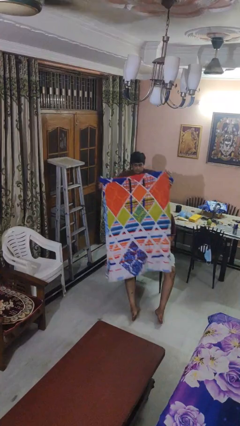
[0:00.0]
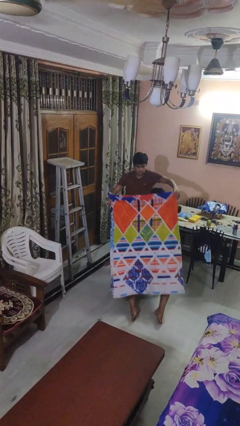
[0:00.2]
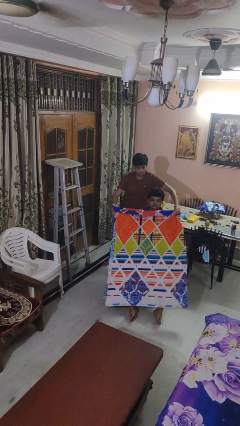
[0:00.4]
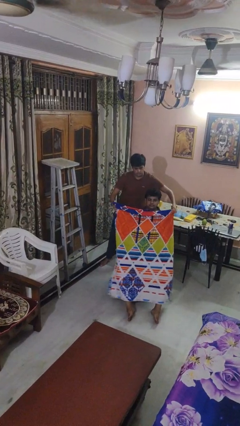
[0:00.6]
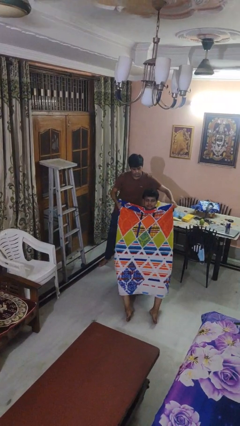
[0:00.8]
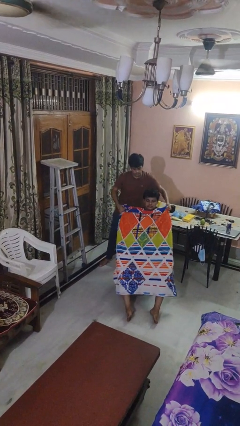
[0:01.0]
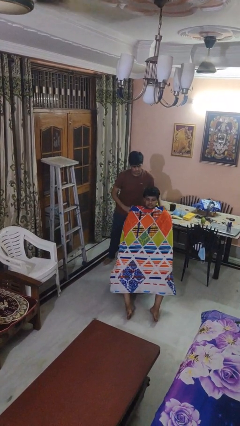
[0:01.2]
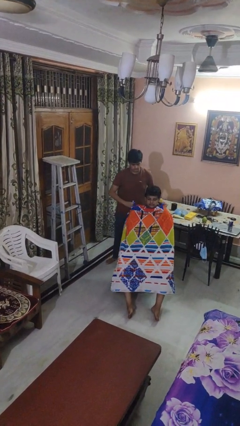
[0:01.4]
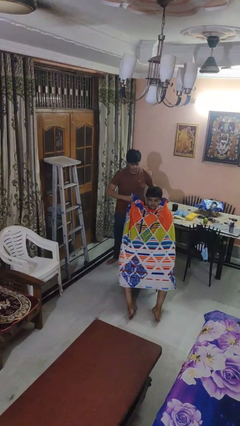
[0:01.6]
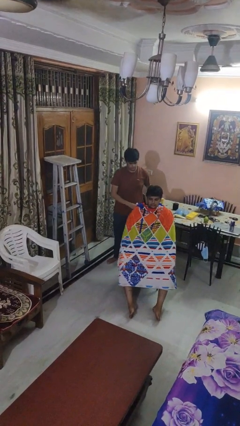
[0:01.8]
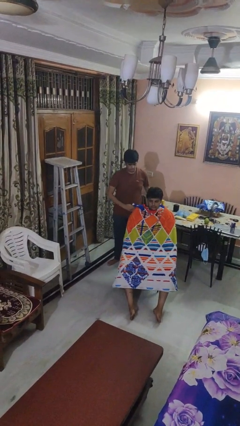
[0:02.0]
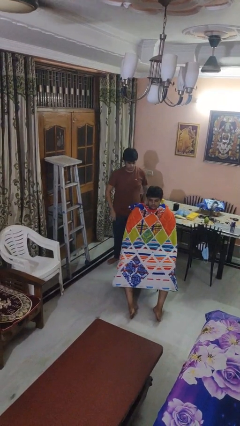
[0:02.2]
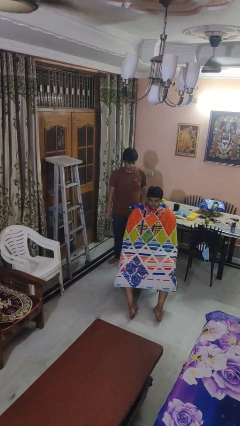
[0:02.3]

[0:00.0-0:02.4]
person covers friend with blanket

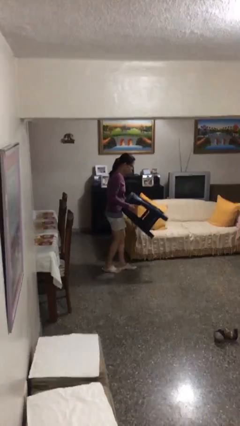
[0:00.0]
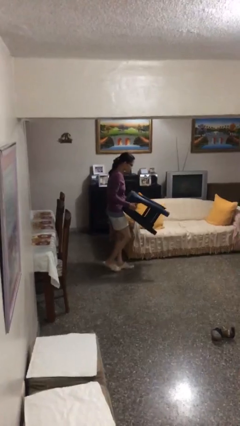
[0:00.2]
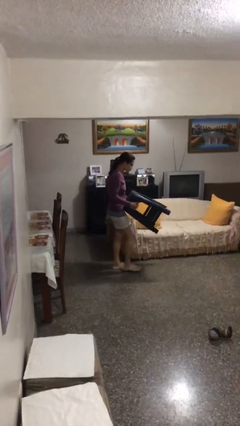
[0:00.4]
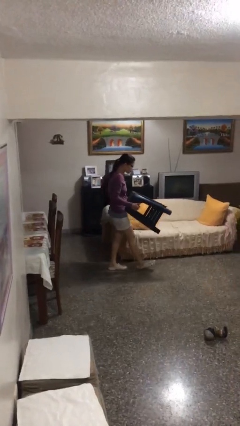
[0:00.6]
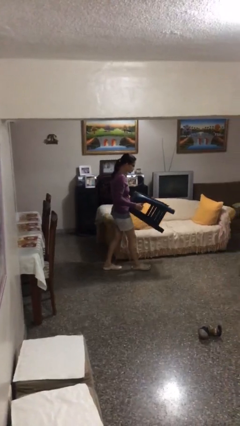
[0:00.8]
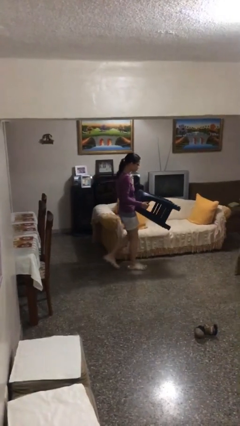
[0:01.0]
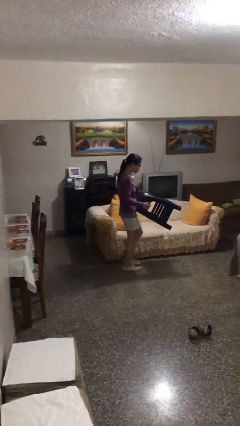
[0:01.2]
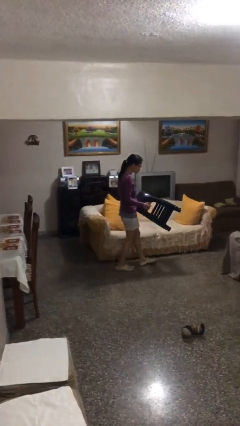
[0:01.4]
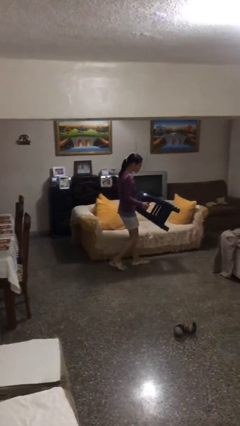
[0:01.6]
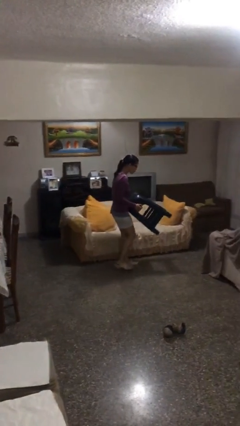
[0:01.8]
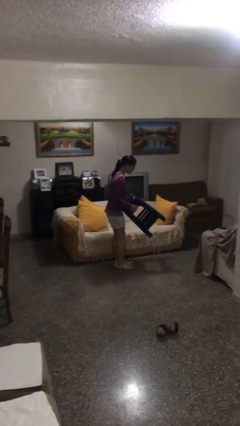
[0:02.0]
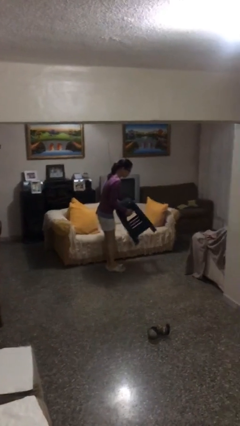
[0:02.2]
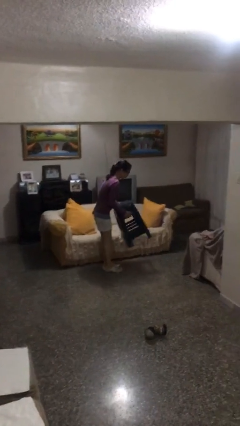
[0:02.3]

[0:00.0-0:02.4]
person carries heavy object

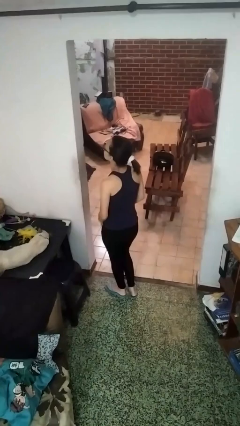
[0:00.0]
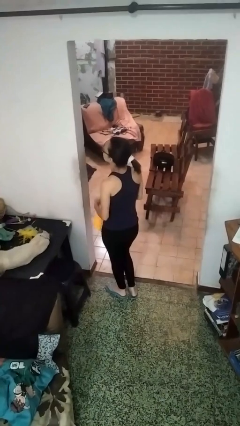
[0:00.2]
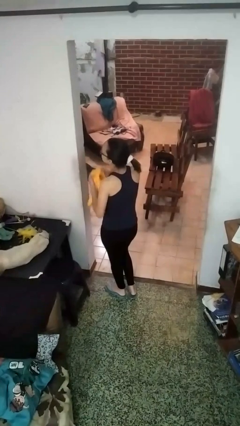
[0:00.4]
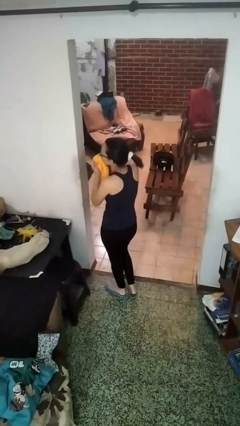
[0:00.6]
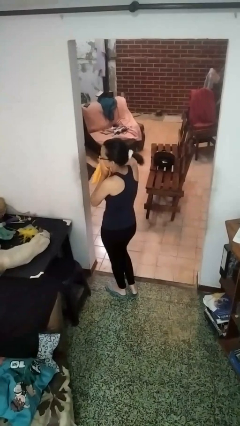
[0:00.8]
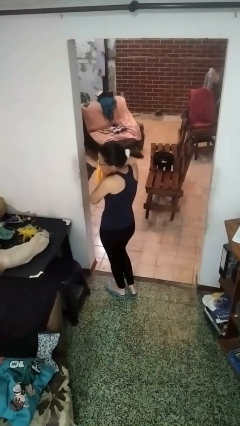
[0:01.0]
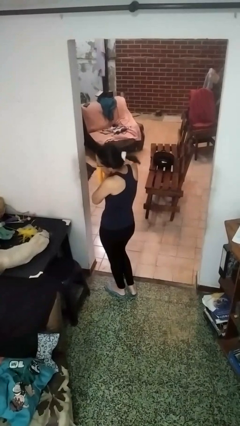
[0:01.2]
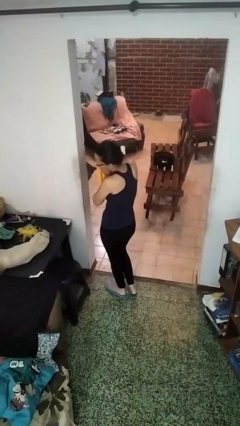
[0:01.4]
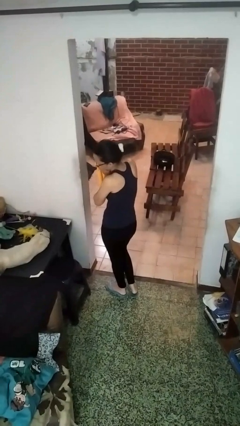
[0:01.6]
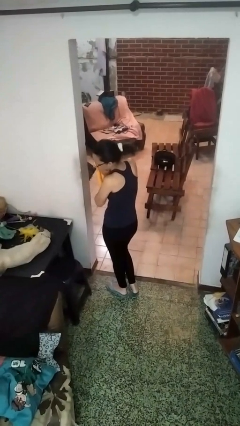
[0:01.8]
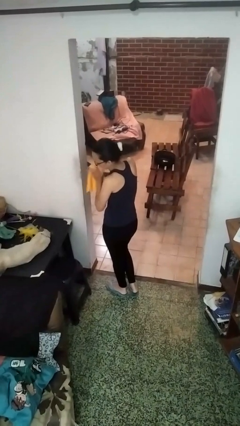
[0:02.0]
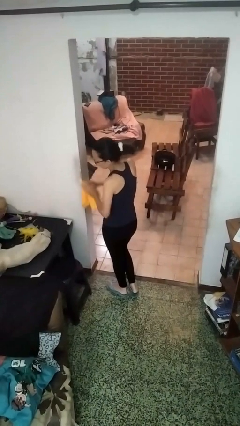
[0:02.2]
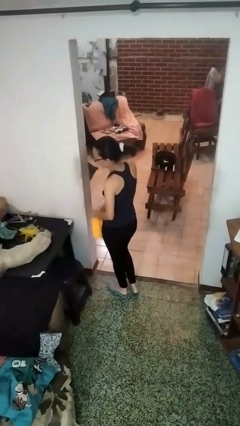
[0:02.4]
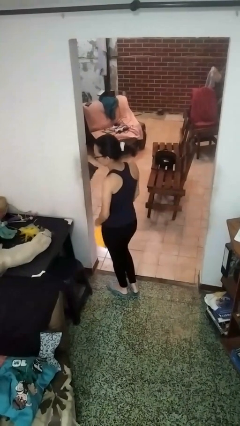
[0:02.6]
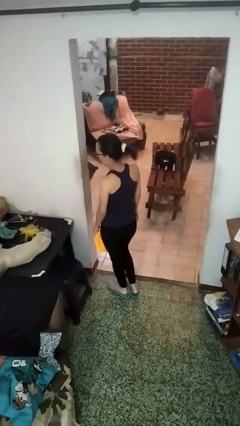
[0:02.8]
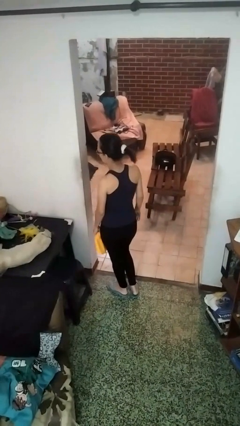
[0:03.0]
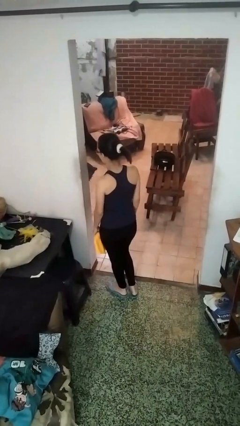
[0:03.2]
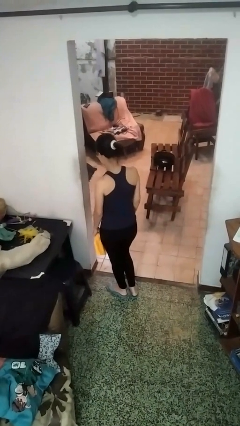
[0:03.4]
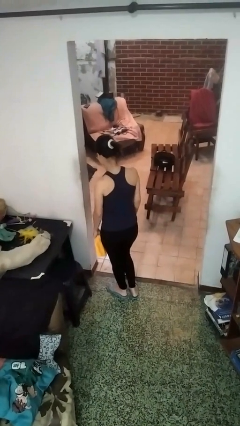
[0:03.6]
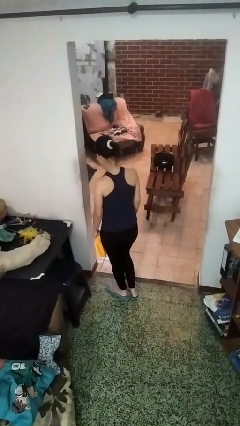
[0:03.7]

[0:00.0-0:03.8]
person blows nose

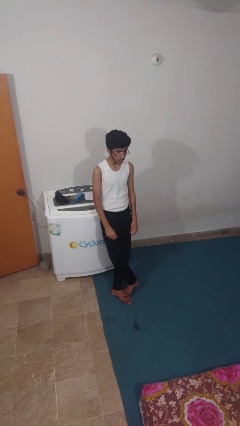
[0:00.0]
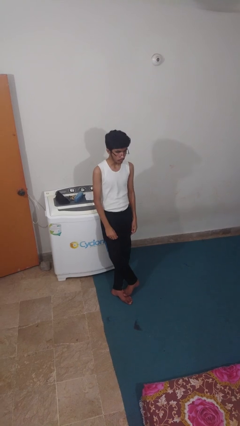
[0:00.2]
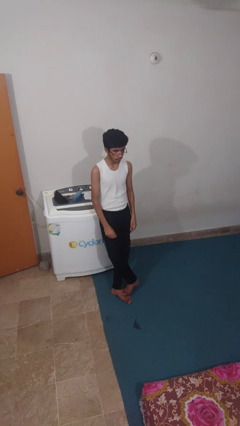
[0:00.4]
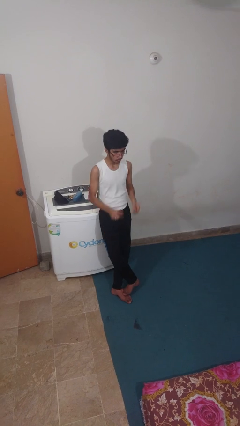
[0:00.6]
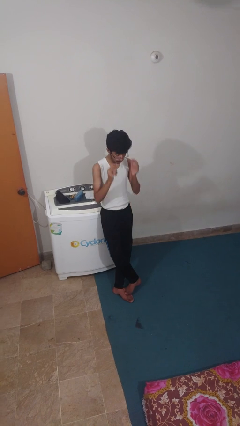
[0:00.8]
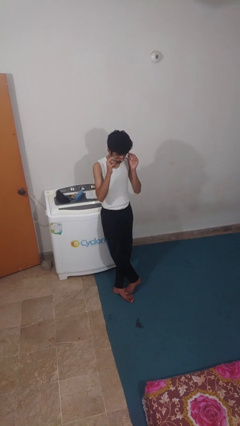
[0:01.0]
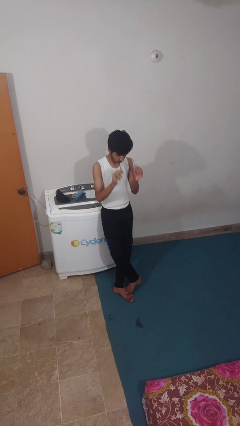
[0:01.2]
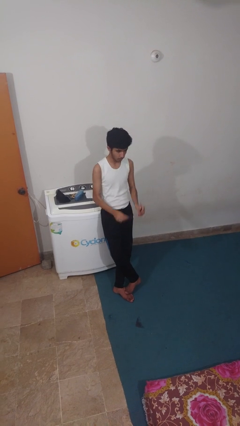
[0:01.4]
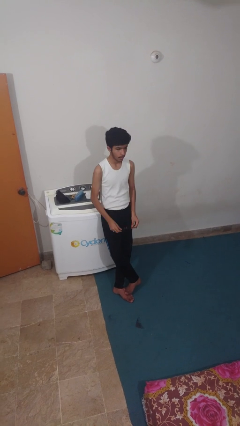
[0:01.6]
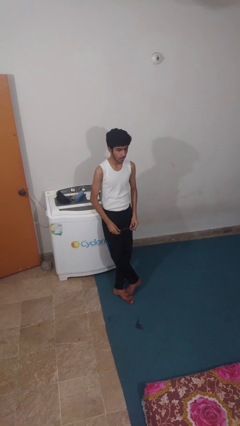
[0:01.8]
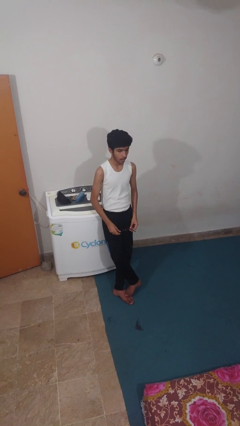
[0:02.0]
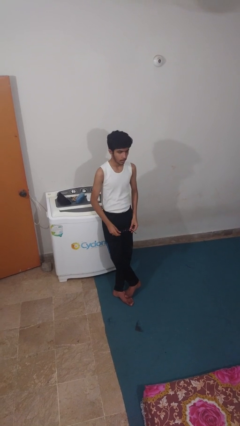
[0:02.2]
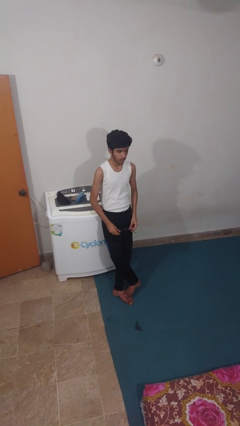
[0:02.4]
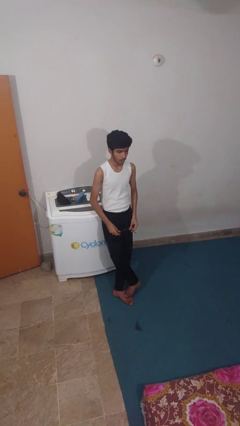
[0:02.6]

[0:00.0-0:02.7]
person takes off glasses

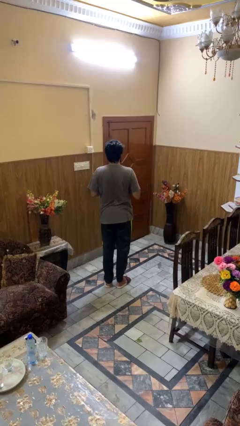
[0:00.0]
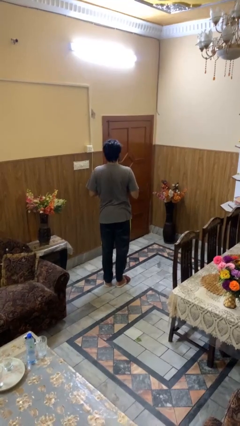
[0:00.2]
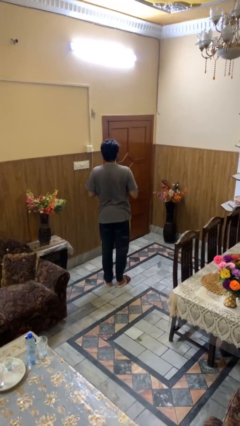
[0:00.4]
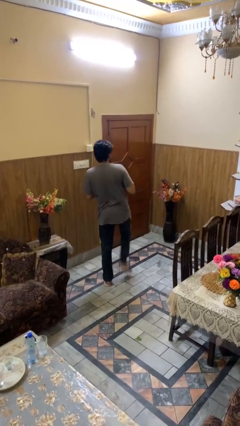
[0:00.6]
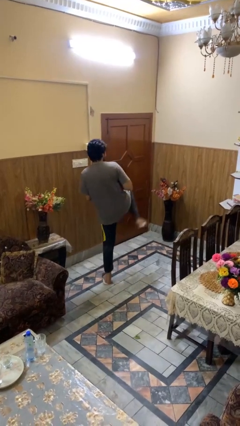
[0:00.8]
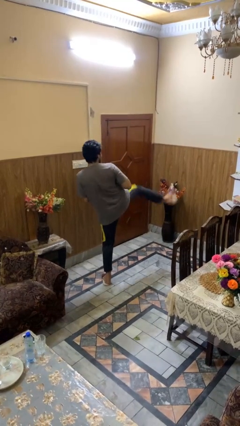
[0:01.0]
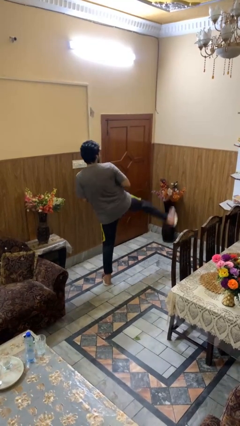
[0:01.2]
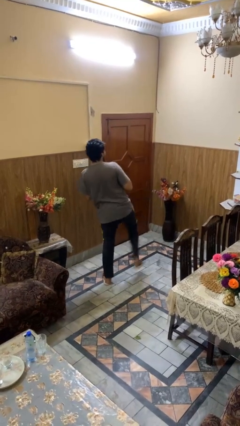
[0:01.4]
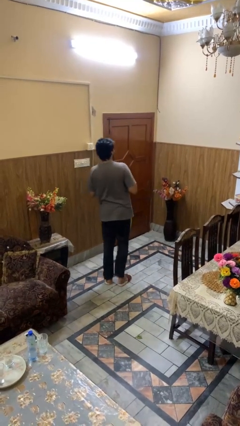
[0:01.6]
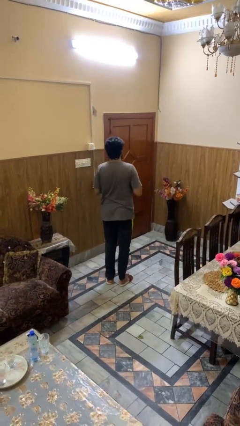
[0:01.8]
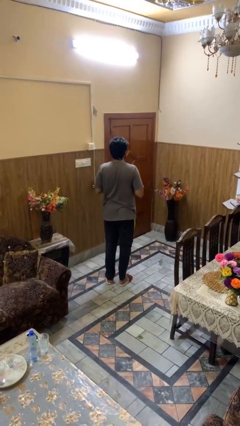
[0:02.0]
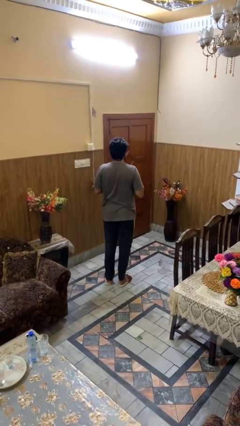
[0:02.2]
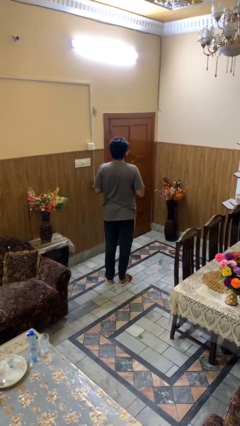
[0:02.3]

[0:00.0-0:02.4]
person karate kicks

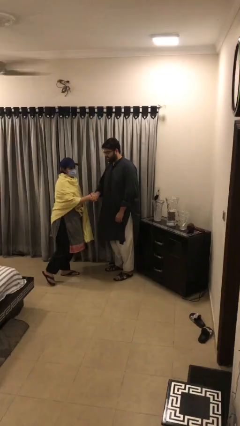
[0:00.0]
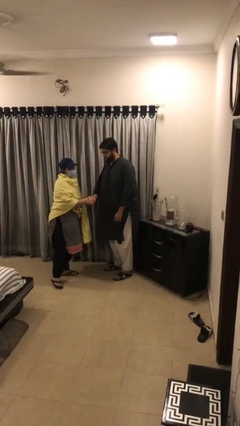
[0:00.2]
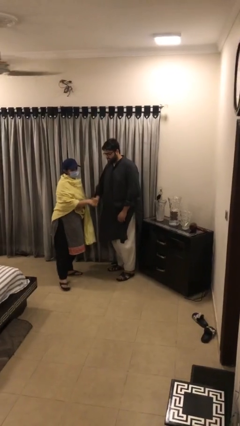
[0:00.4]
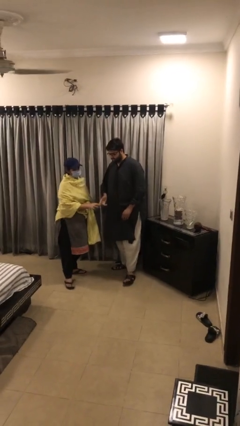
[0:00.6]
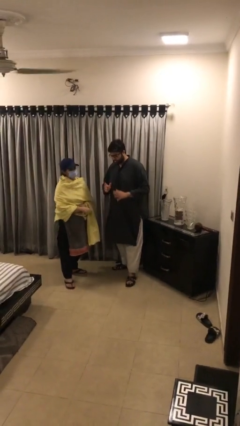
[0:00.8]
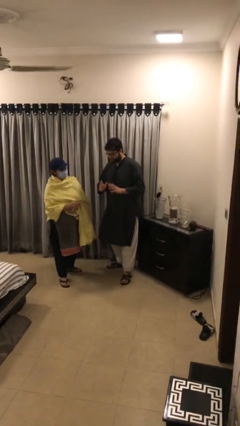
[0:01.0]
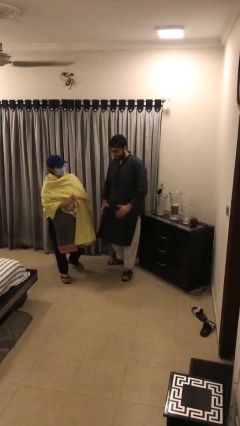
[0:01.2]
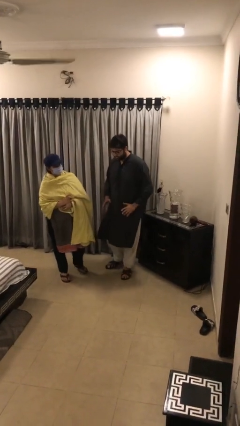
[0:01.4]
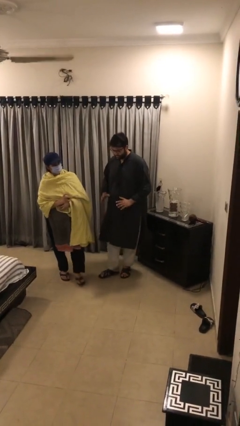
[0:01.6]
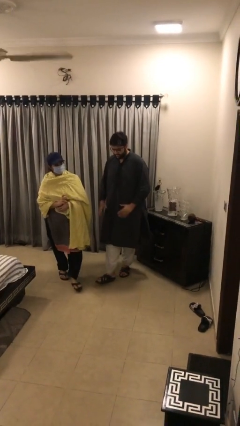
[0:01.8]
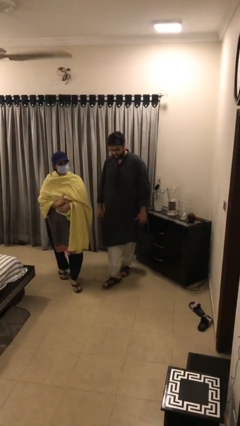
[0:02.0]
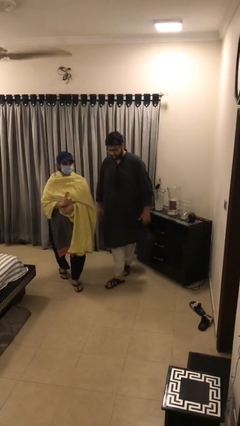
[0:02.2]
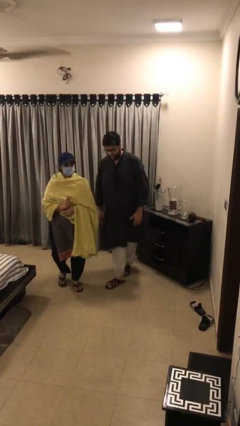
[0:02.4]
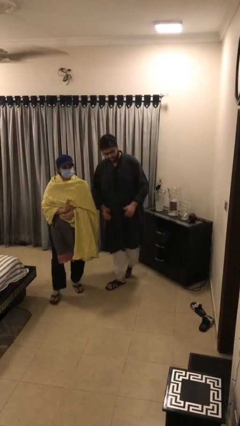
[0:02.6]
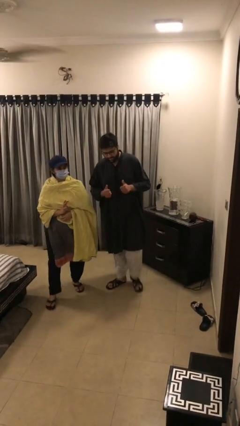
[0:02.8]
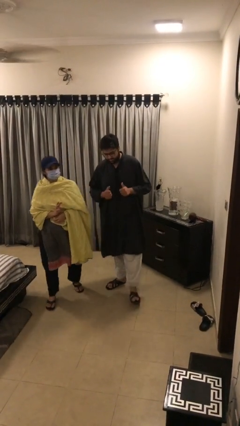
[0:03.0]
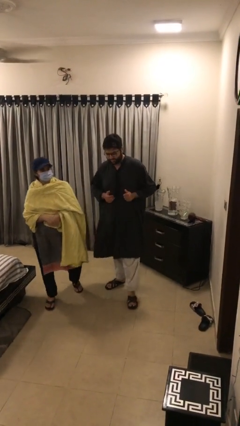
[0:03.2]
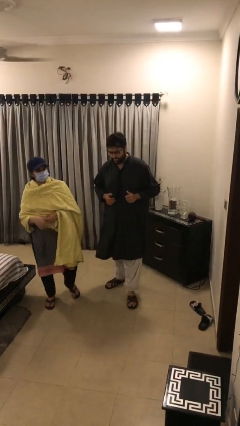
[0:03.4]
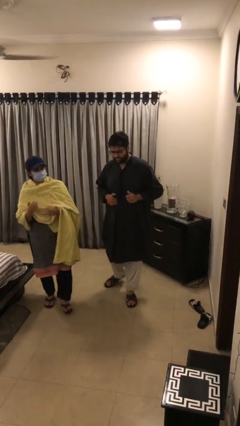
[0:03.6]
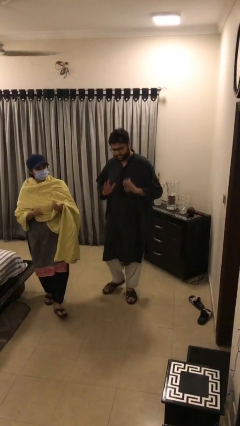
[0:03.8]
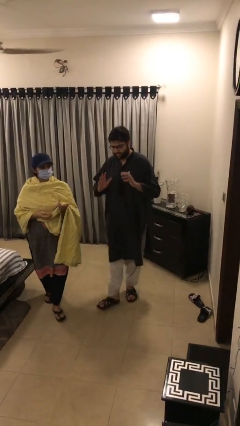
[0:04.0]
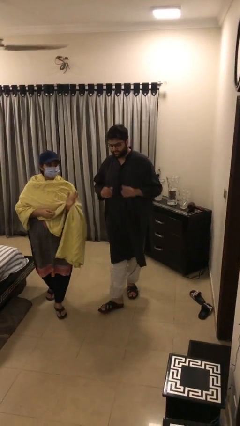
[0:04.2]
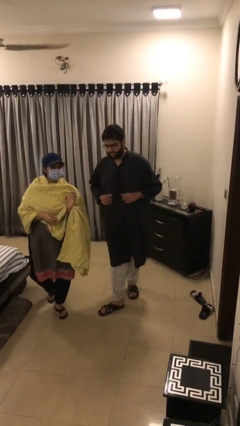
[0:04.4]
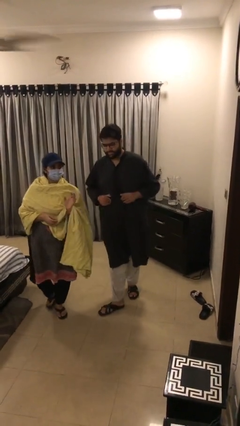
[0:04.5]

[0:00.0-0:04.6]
person talks to person
